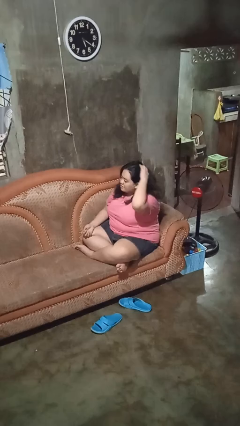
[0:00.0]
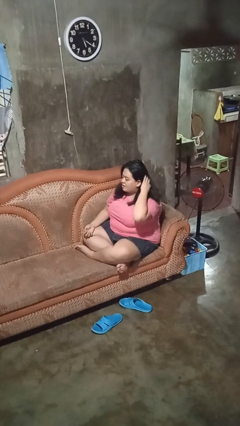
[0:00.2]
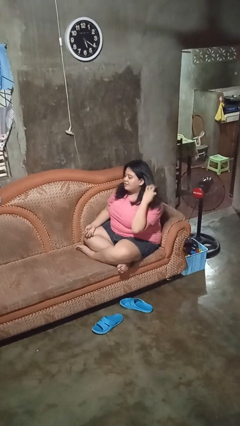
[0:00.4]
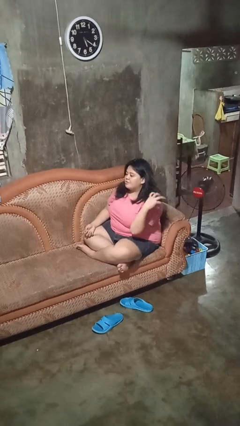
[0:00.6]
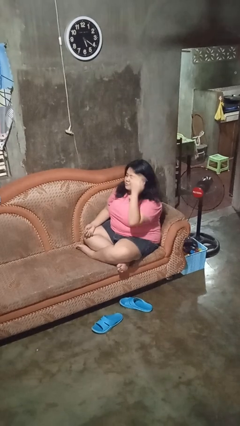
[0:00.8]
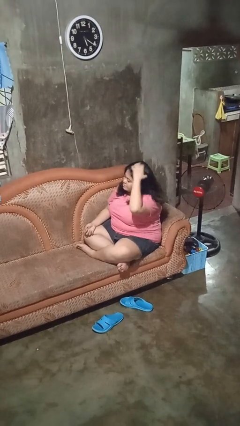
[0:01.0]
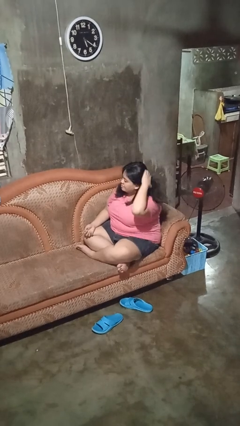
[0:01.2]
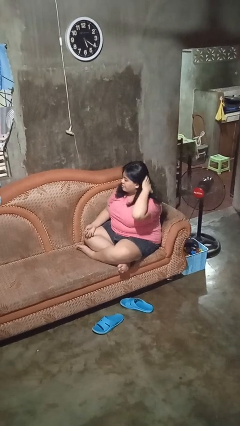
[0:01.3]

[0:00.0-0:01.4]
person strokes hair

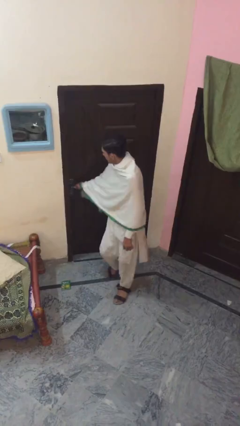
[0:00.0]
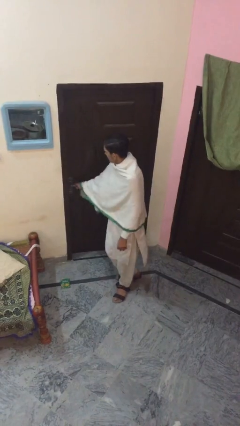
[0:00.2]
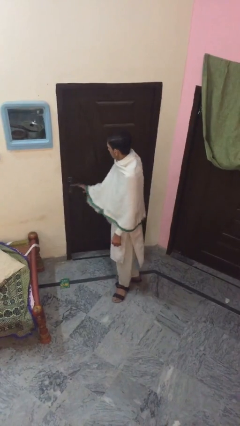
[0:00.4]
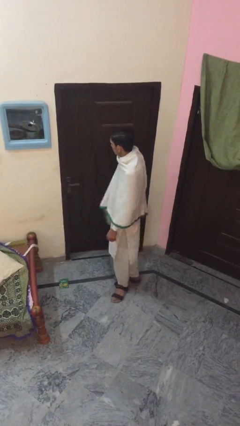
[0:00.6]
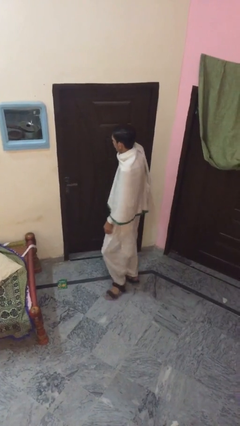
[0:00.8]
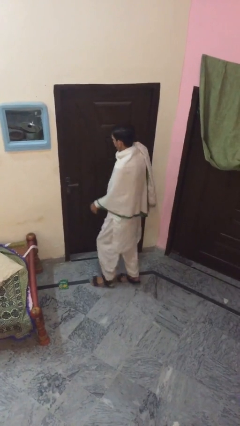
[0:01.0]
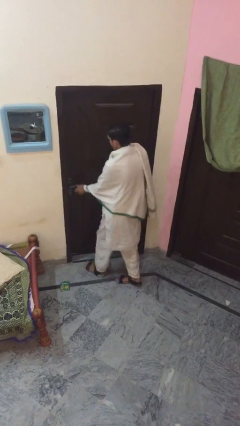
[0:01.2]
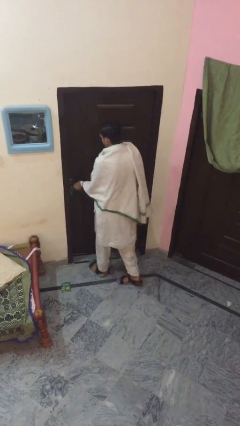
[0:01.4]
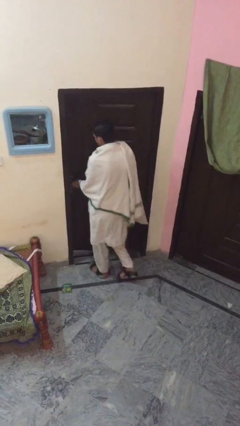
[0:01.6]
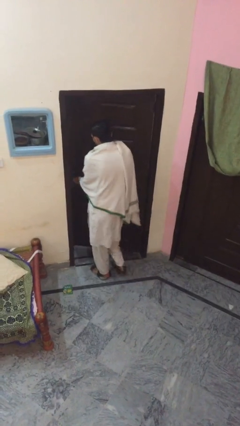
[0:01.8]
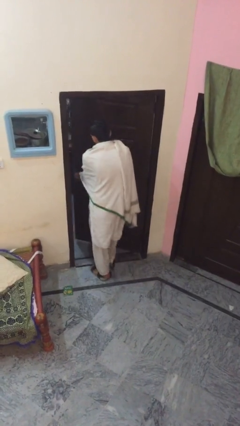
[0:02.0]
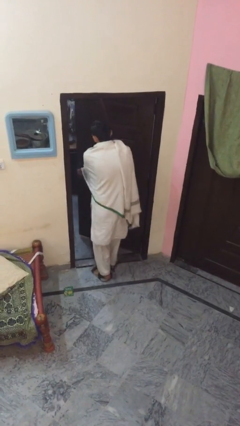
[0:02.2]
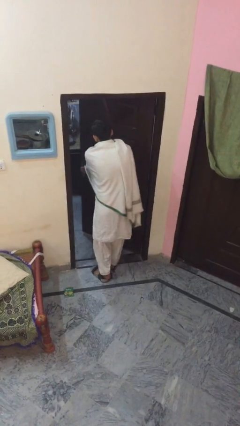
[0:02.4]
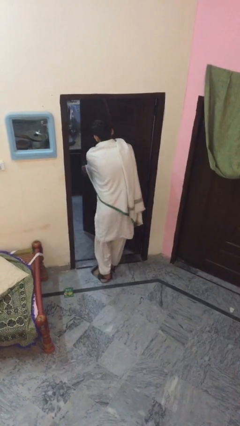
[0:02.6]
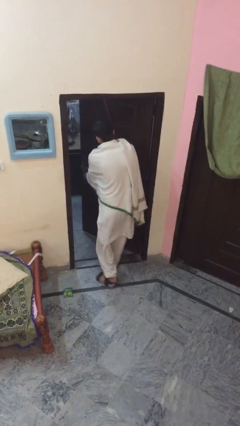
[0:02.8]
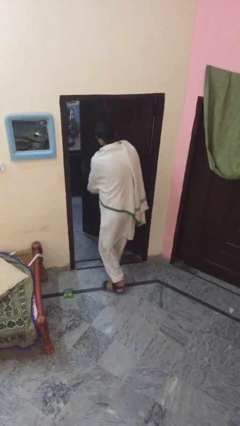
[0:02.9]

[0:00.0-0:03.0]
person opens facility door

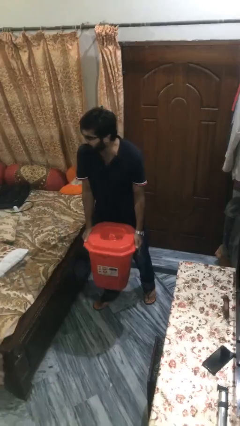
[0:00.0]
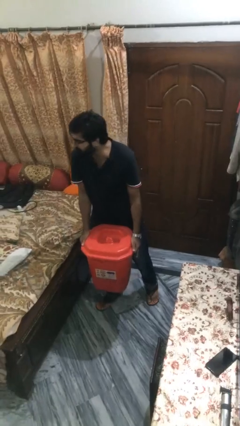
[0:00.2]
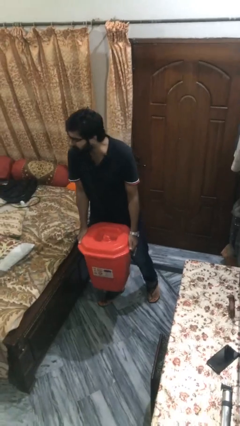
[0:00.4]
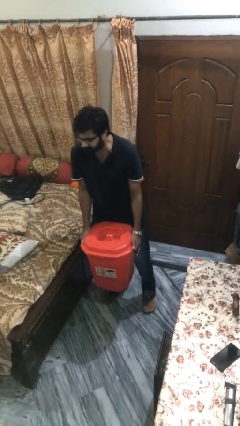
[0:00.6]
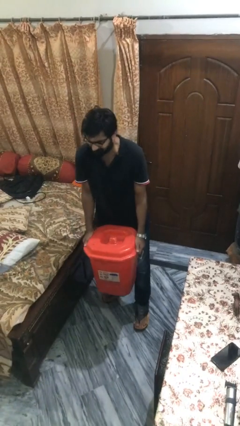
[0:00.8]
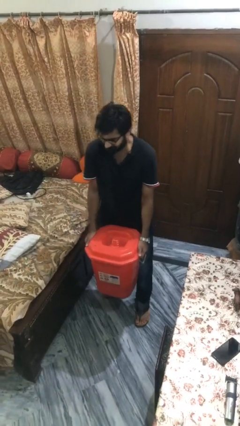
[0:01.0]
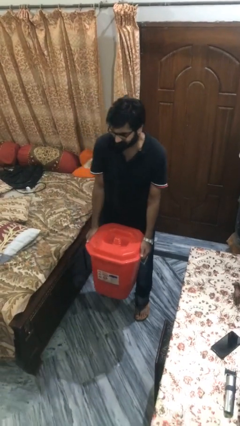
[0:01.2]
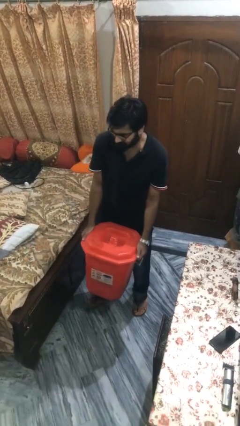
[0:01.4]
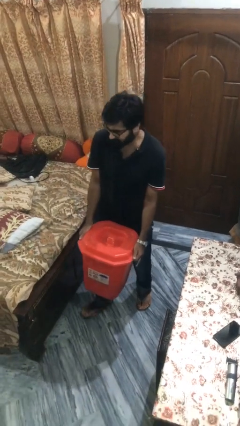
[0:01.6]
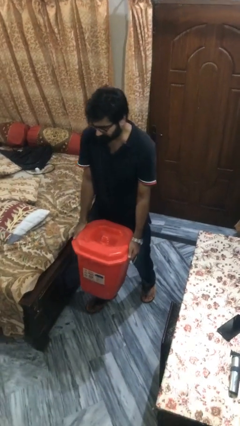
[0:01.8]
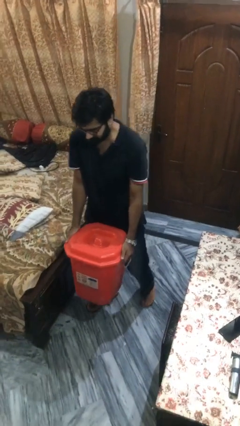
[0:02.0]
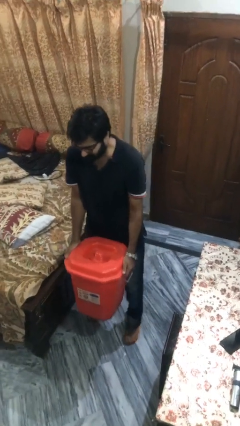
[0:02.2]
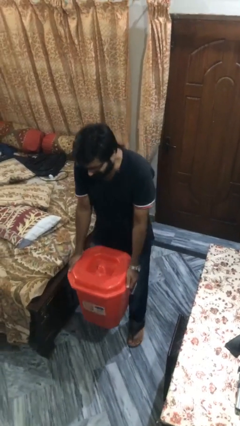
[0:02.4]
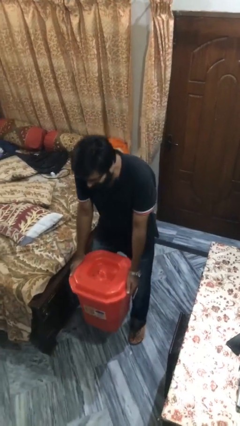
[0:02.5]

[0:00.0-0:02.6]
person carries heavy object

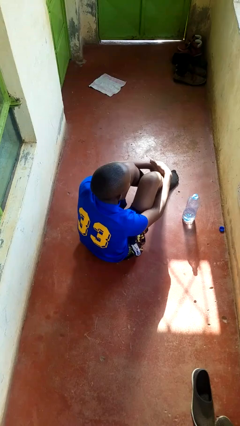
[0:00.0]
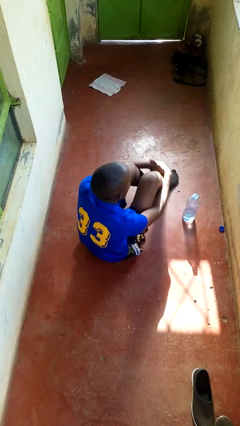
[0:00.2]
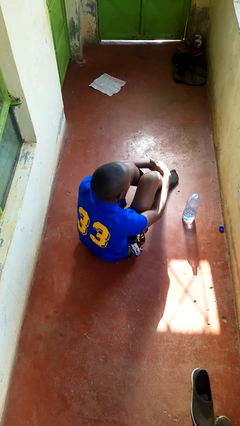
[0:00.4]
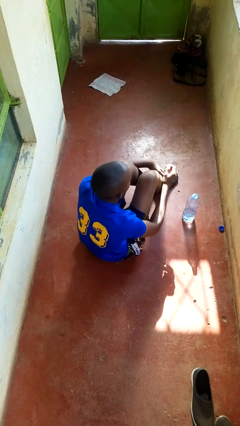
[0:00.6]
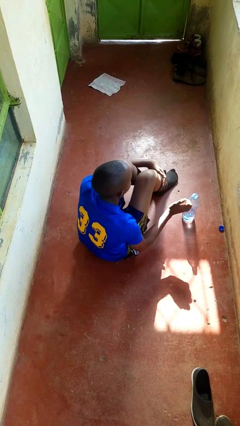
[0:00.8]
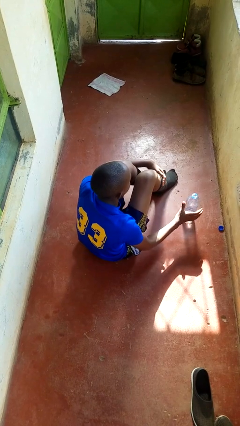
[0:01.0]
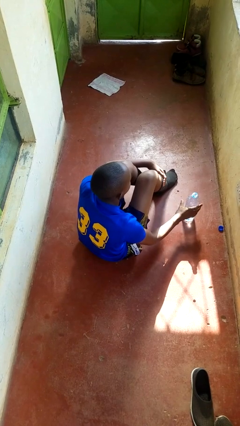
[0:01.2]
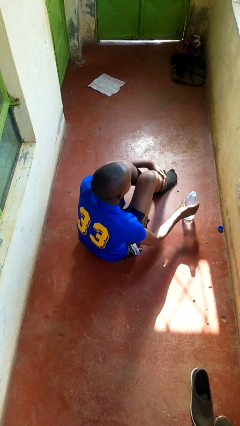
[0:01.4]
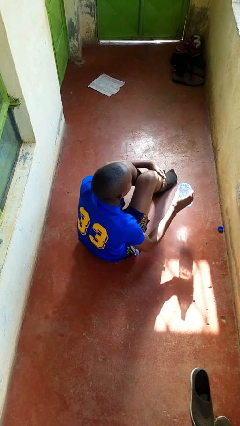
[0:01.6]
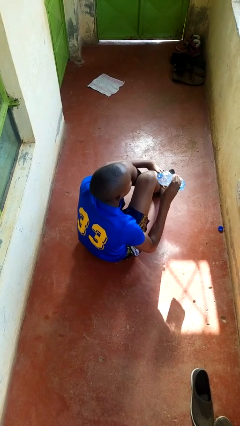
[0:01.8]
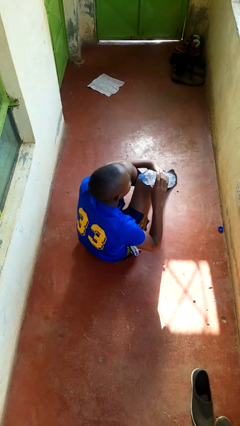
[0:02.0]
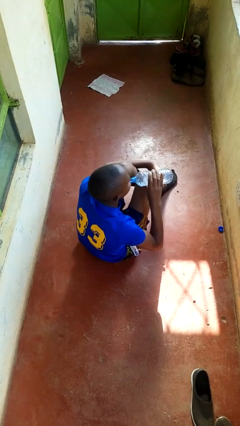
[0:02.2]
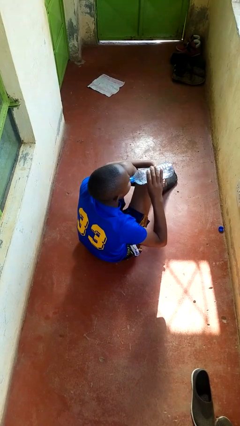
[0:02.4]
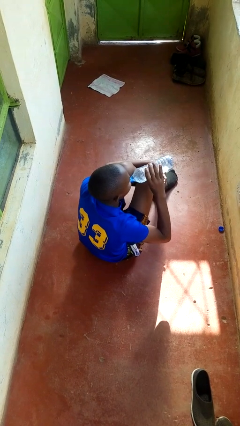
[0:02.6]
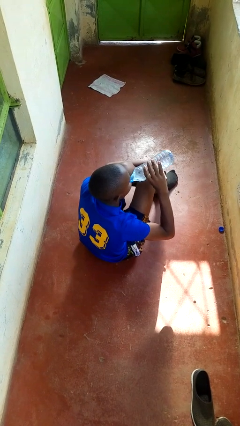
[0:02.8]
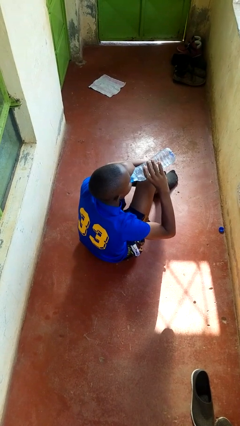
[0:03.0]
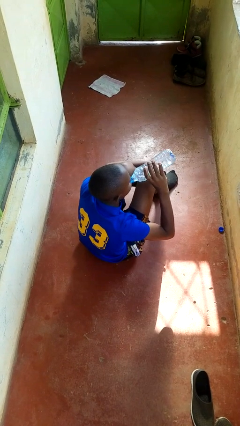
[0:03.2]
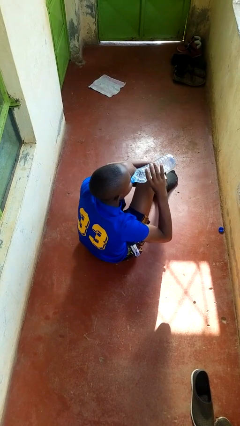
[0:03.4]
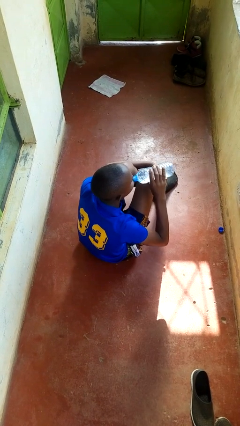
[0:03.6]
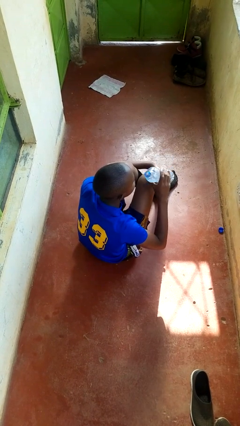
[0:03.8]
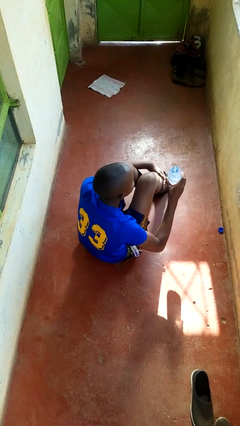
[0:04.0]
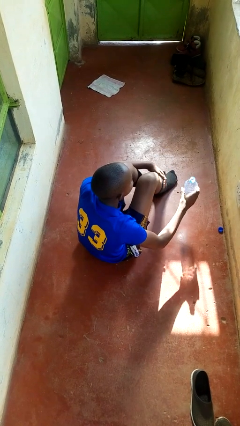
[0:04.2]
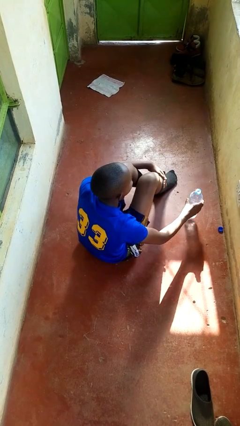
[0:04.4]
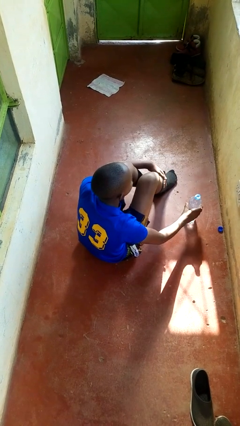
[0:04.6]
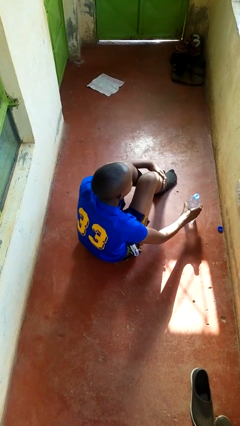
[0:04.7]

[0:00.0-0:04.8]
person drinks from bottle

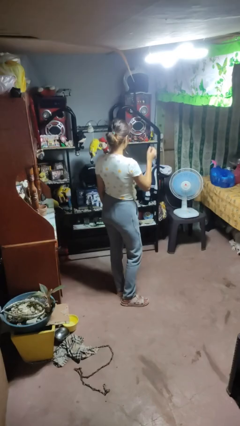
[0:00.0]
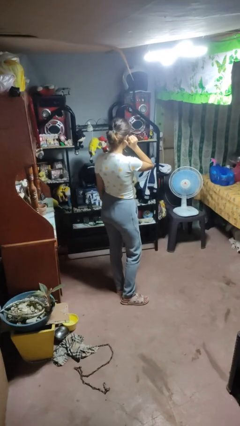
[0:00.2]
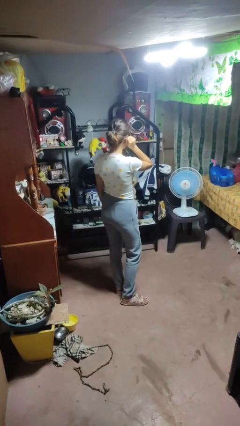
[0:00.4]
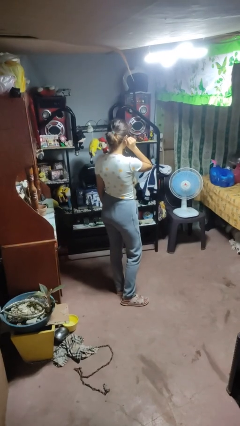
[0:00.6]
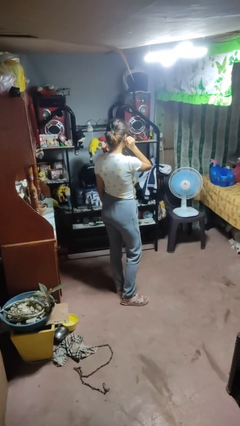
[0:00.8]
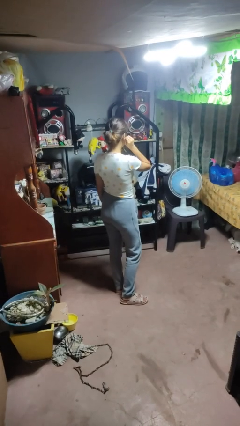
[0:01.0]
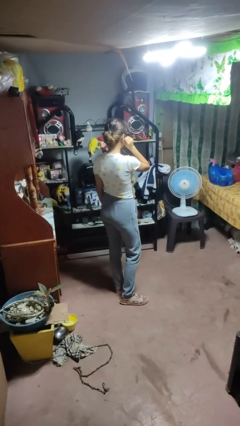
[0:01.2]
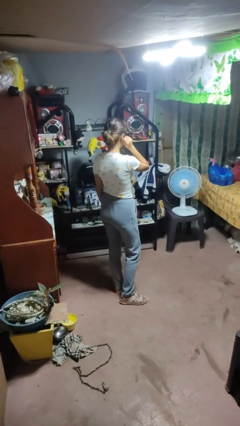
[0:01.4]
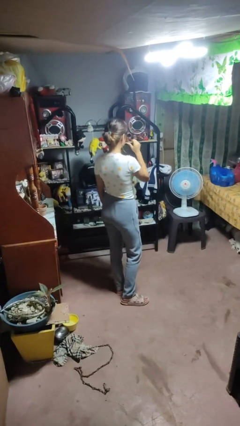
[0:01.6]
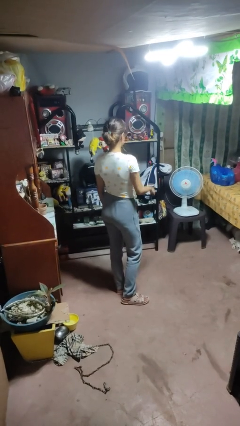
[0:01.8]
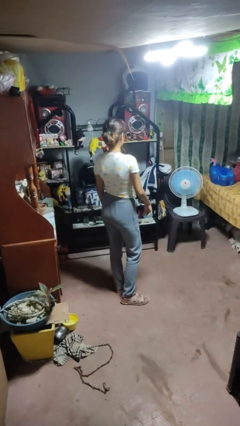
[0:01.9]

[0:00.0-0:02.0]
person touches earlobe

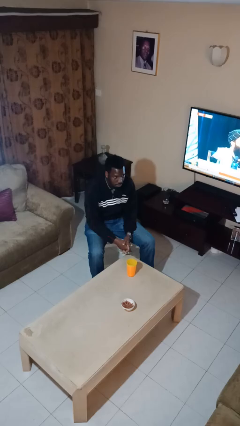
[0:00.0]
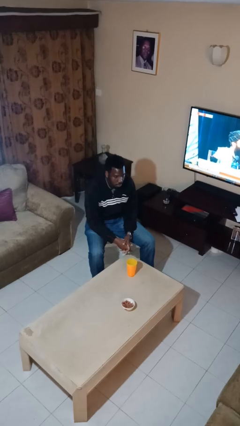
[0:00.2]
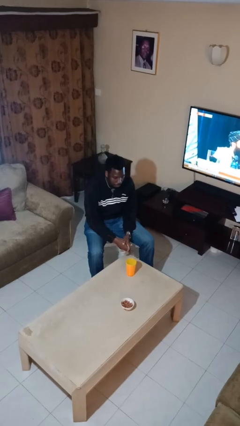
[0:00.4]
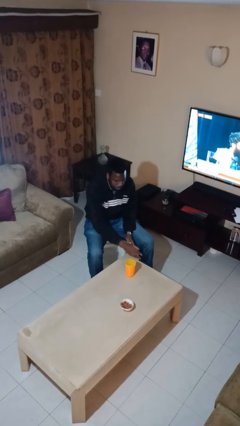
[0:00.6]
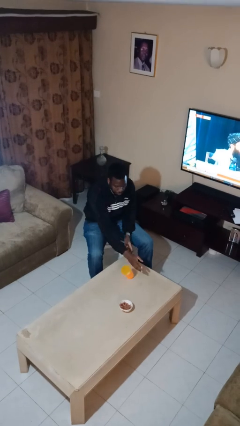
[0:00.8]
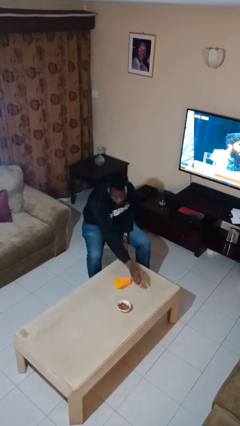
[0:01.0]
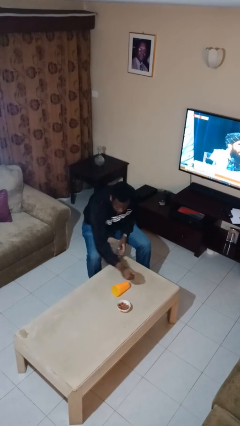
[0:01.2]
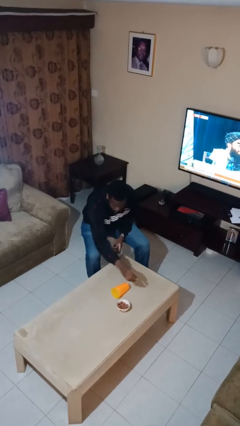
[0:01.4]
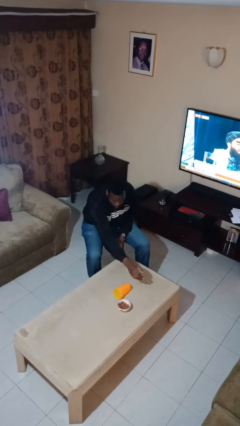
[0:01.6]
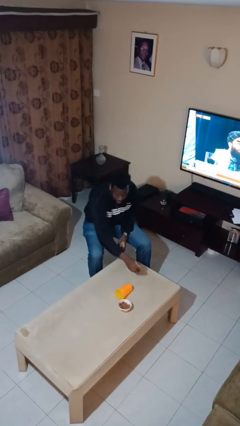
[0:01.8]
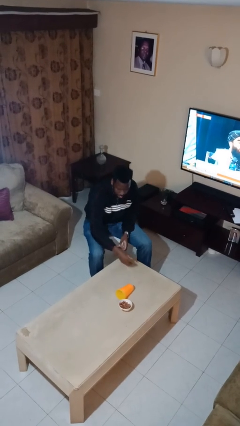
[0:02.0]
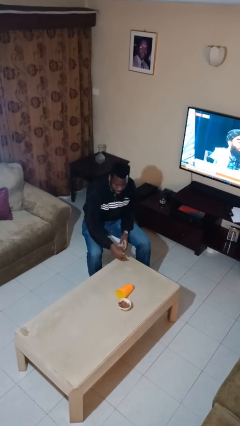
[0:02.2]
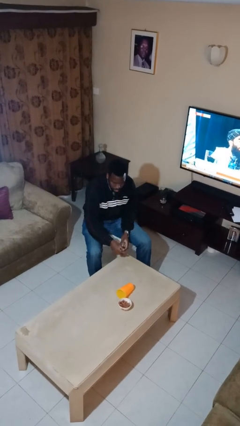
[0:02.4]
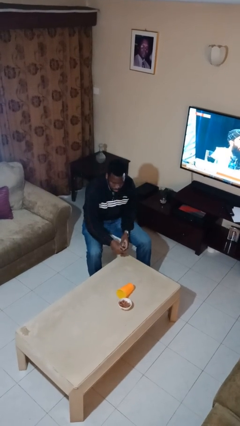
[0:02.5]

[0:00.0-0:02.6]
person knocks over glass

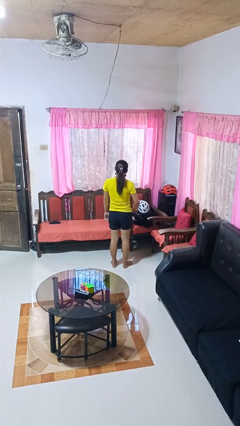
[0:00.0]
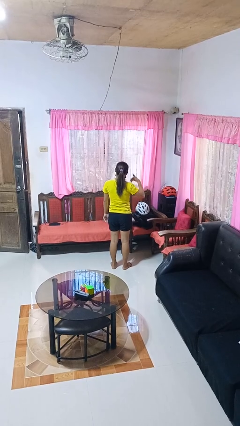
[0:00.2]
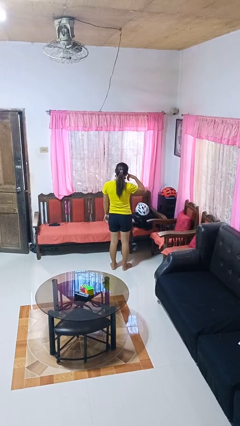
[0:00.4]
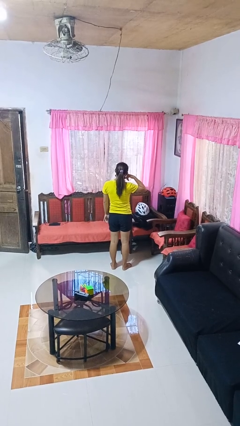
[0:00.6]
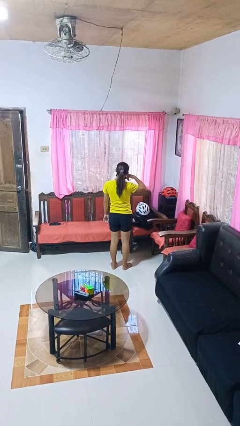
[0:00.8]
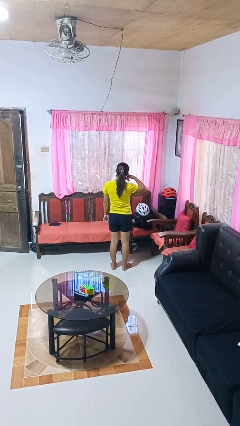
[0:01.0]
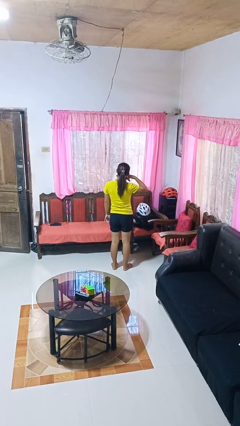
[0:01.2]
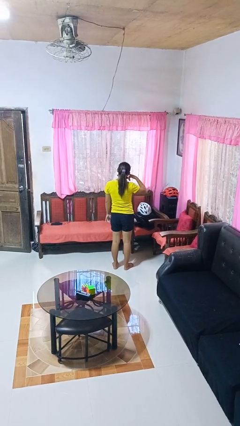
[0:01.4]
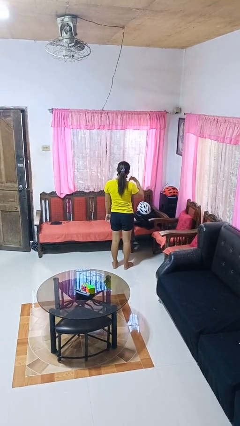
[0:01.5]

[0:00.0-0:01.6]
person gestures call me
